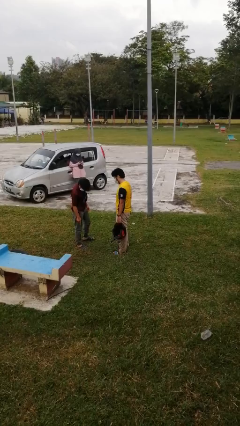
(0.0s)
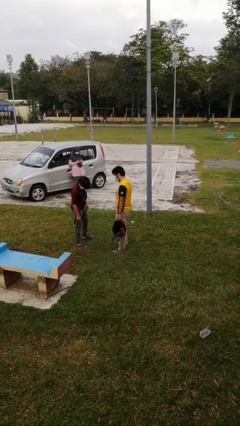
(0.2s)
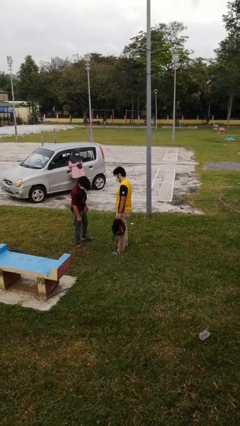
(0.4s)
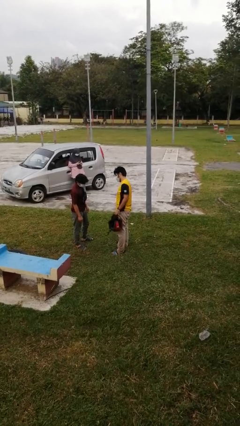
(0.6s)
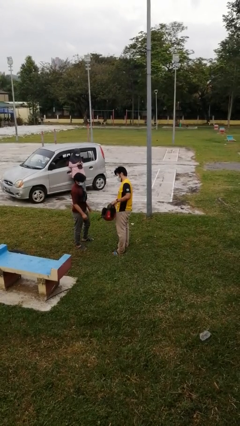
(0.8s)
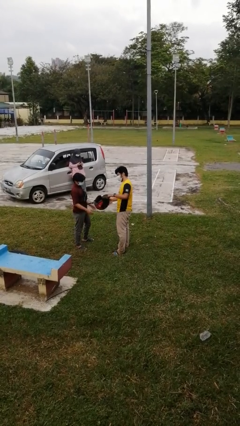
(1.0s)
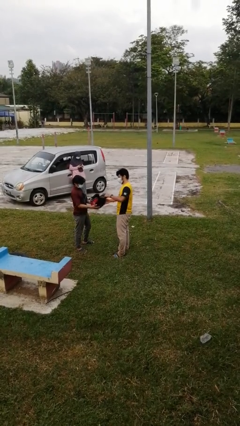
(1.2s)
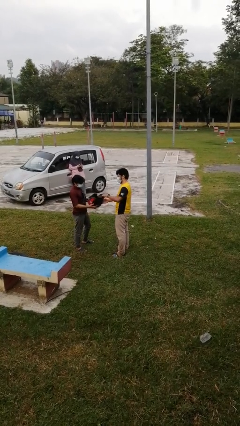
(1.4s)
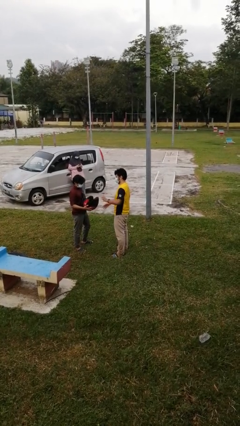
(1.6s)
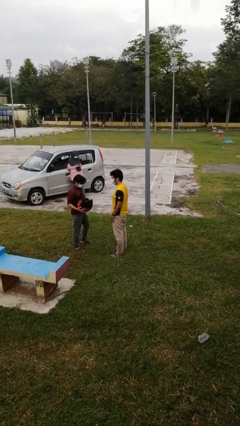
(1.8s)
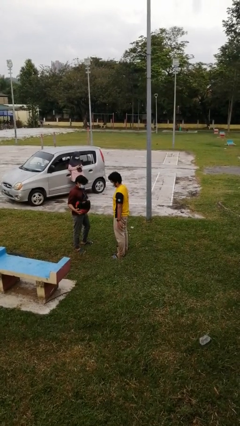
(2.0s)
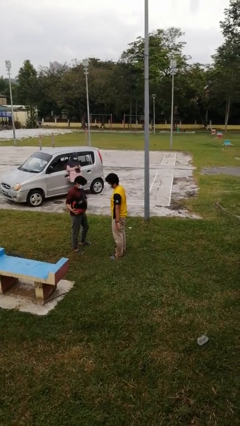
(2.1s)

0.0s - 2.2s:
person transfers object to person

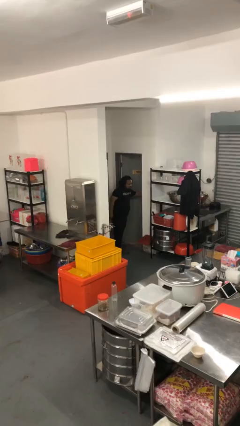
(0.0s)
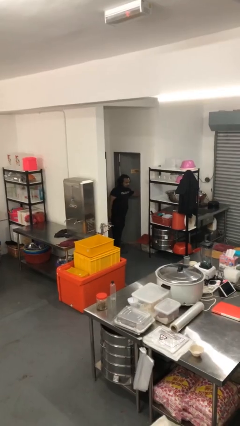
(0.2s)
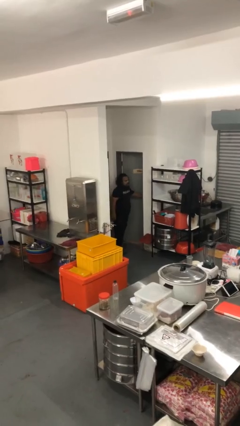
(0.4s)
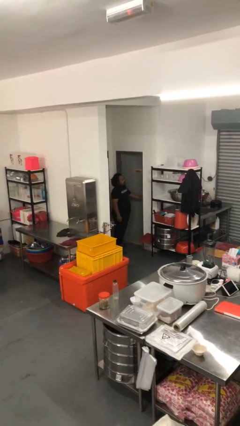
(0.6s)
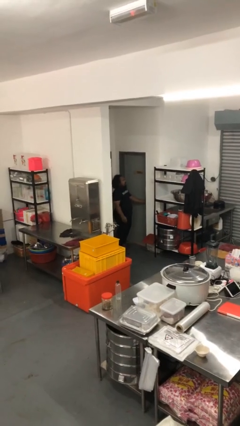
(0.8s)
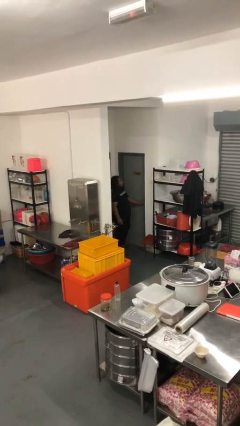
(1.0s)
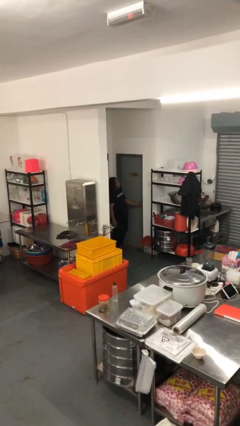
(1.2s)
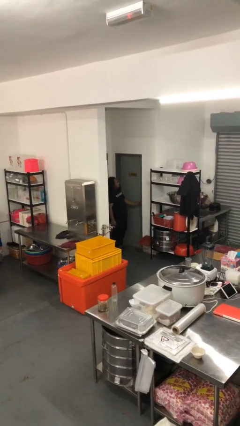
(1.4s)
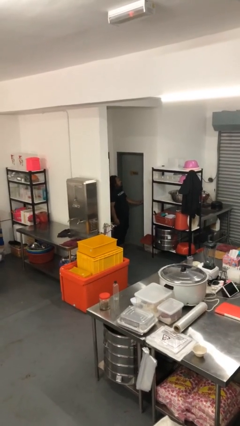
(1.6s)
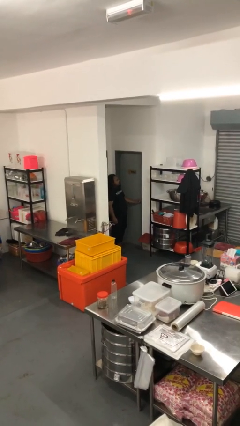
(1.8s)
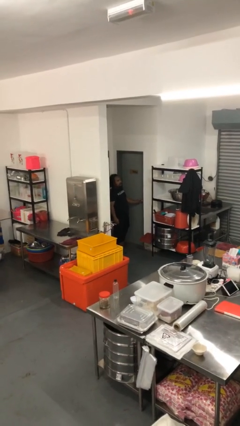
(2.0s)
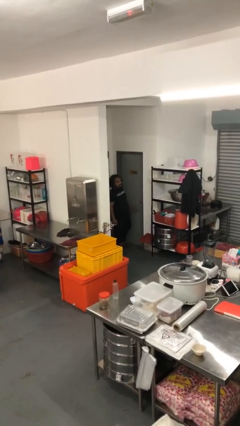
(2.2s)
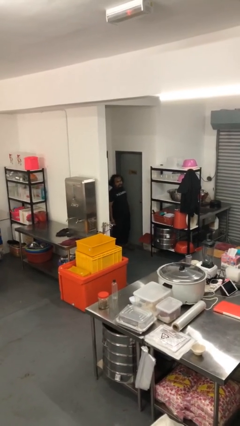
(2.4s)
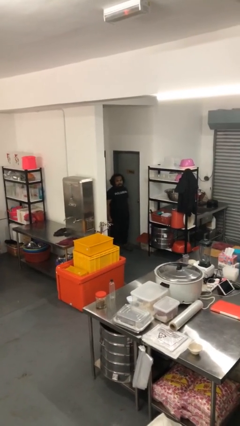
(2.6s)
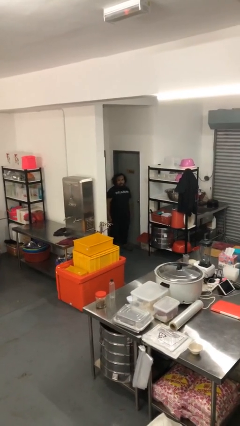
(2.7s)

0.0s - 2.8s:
person closes facility door

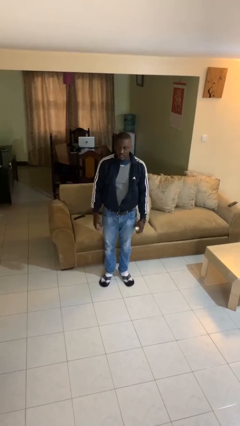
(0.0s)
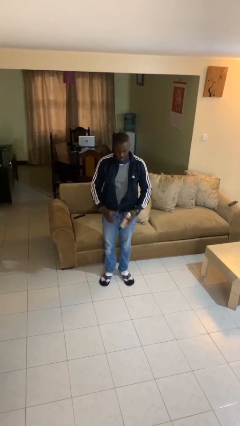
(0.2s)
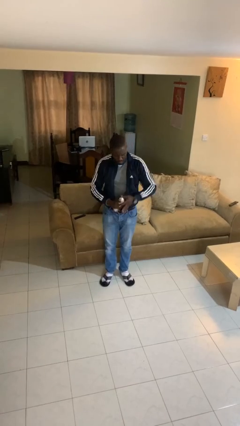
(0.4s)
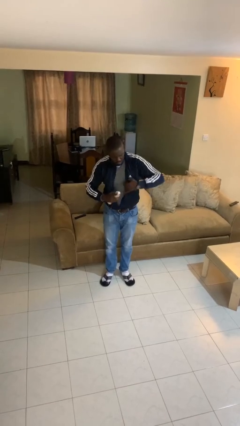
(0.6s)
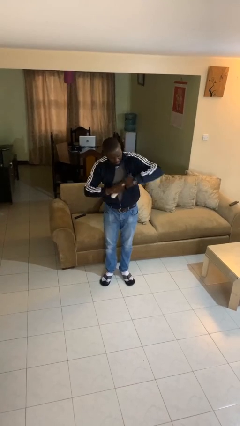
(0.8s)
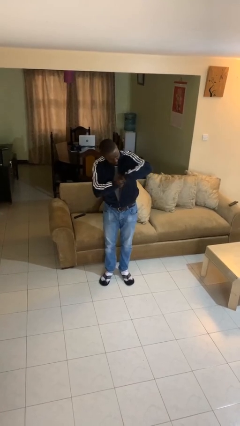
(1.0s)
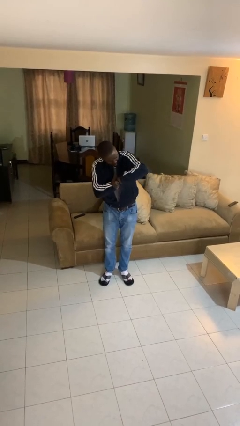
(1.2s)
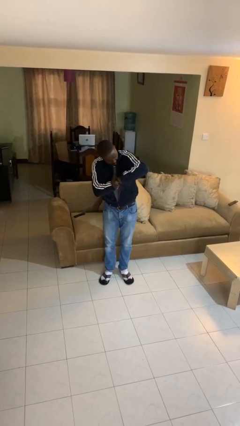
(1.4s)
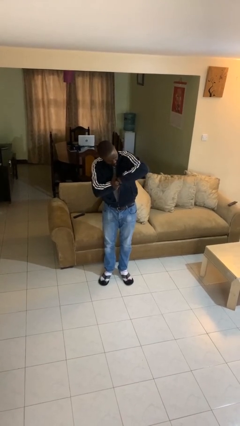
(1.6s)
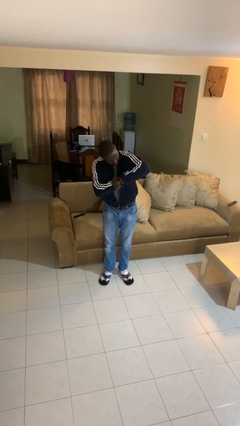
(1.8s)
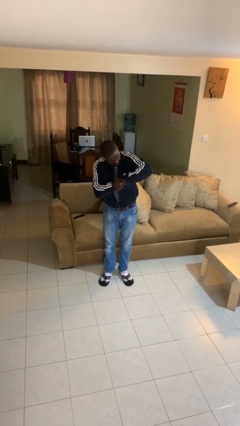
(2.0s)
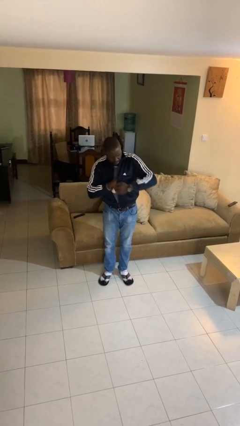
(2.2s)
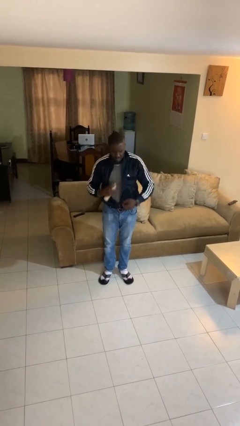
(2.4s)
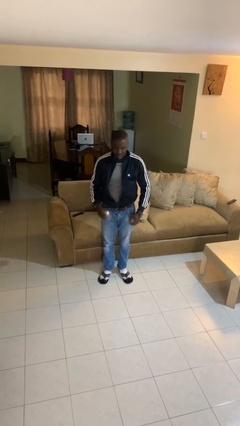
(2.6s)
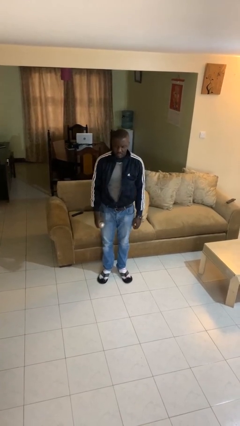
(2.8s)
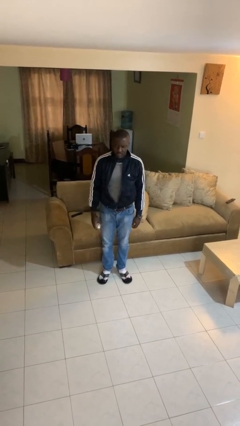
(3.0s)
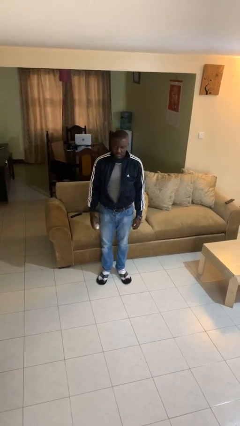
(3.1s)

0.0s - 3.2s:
person applies deodorant

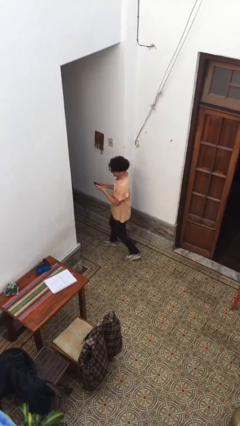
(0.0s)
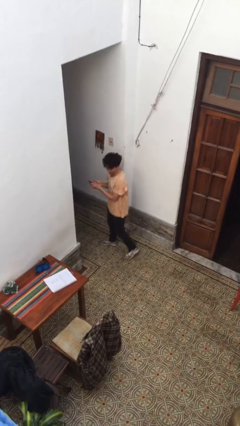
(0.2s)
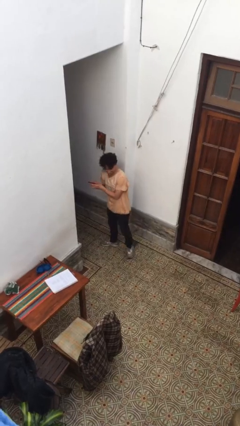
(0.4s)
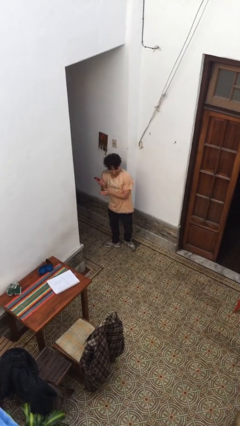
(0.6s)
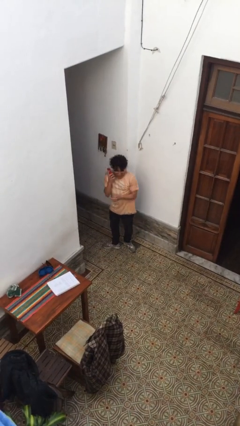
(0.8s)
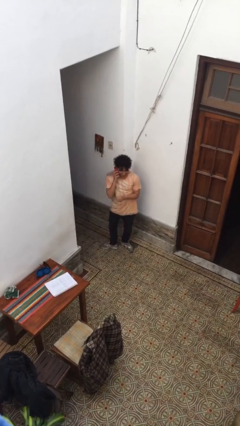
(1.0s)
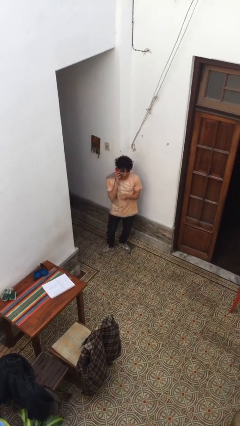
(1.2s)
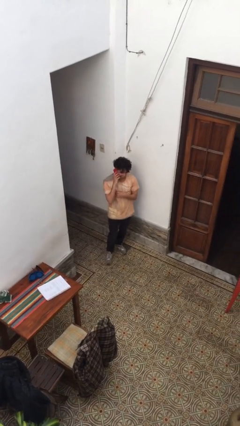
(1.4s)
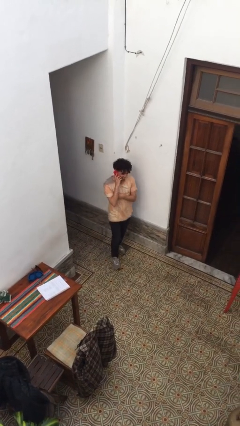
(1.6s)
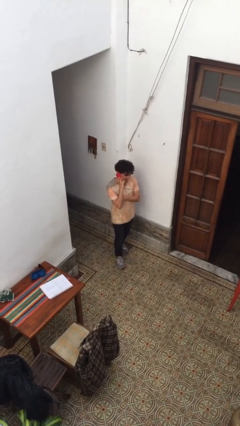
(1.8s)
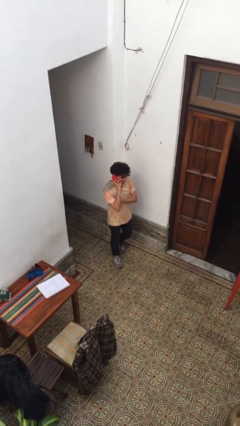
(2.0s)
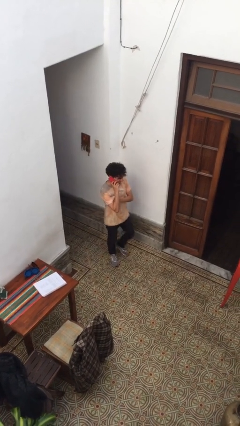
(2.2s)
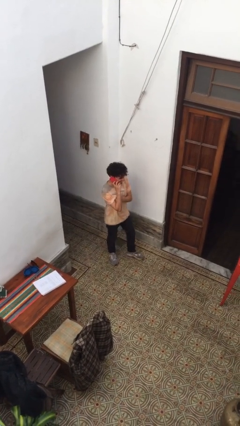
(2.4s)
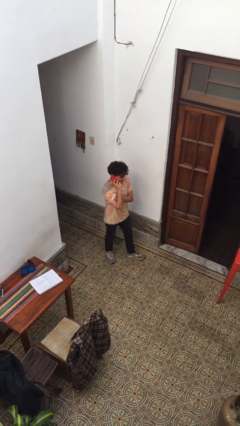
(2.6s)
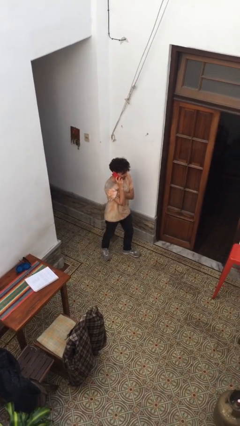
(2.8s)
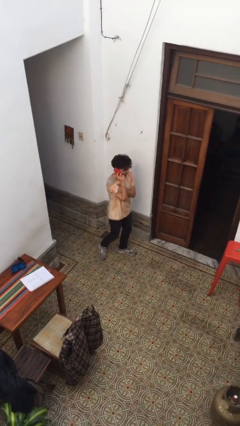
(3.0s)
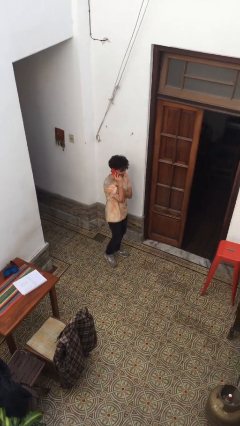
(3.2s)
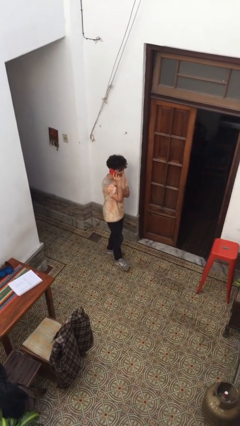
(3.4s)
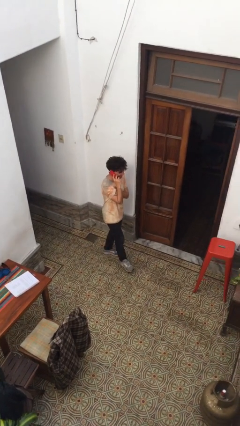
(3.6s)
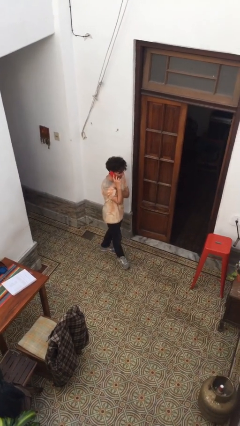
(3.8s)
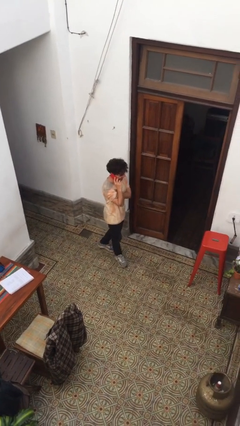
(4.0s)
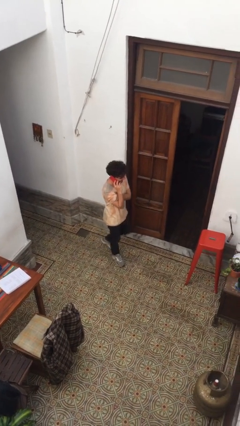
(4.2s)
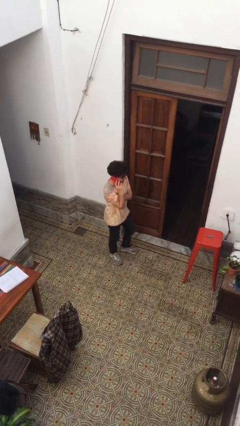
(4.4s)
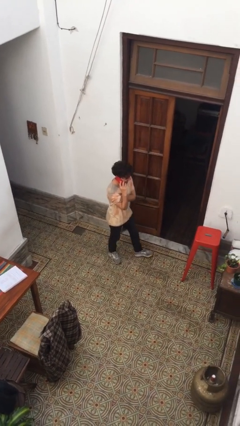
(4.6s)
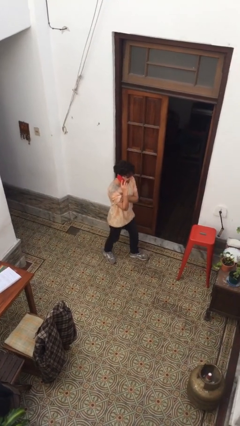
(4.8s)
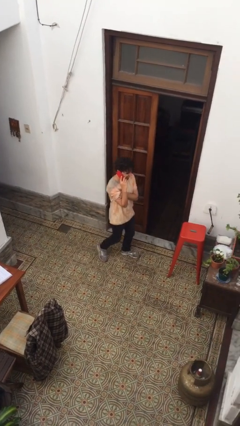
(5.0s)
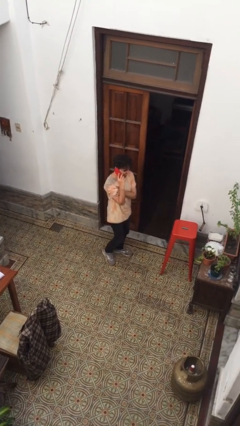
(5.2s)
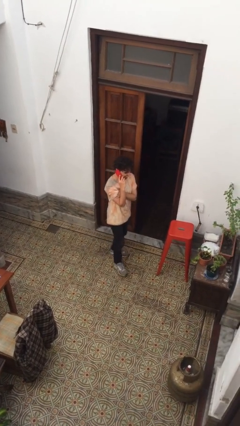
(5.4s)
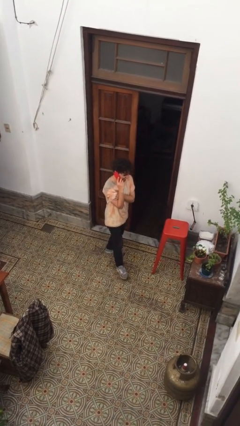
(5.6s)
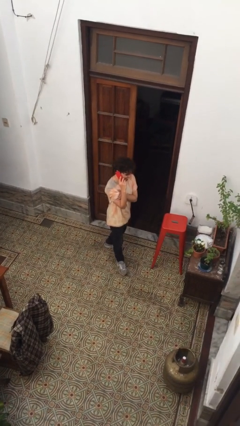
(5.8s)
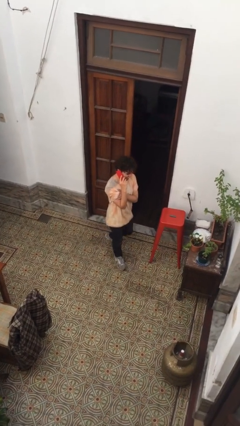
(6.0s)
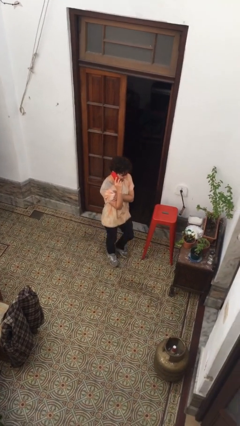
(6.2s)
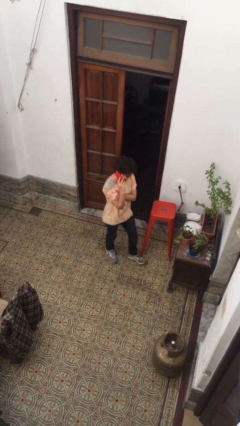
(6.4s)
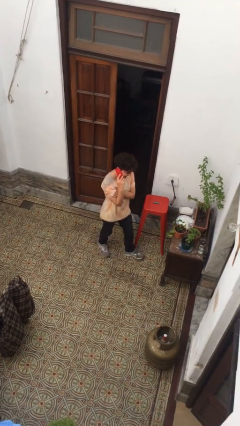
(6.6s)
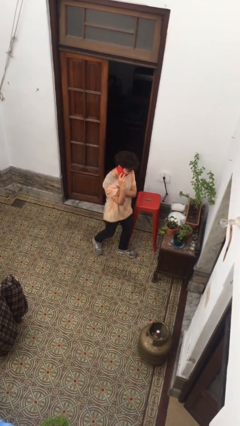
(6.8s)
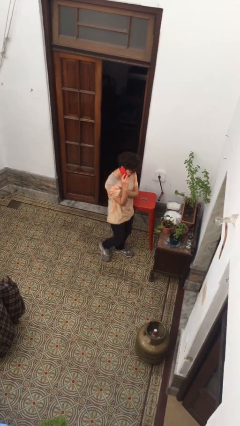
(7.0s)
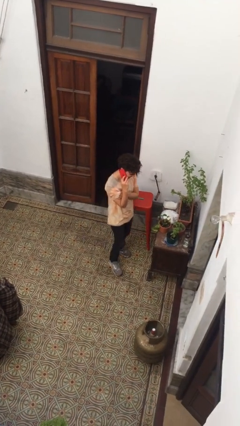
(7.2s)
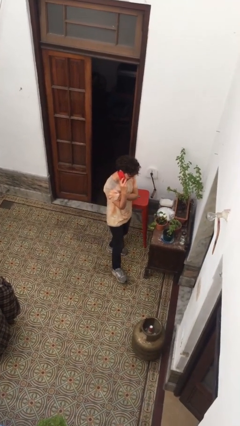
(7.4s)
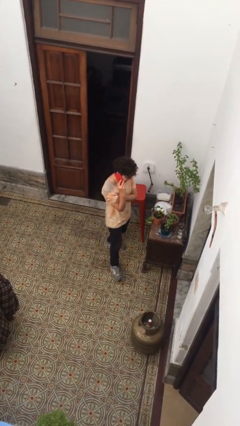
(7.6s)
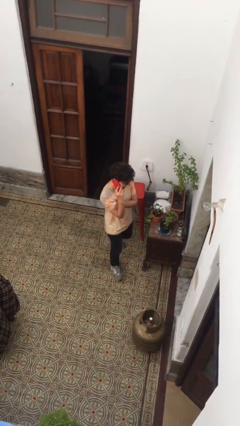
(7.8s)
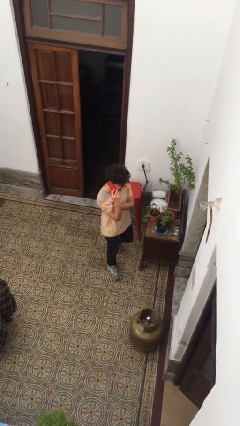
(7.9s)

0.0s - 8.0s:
person talks on phone

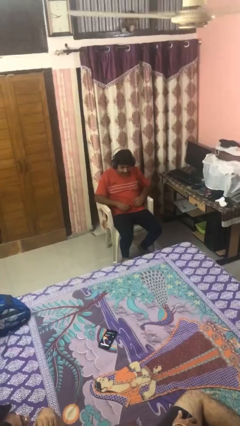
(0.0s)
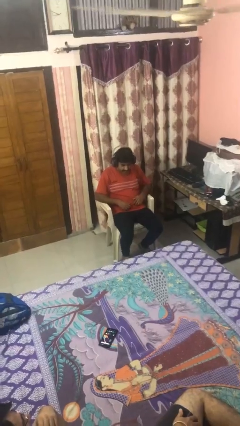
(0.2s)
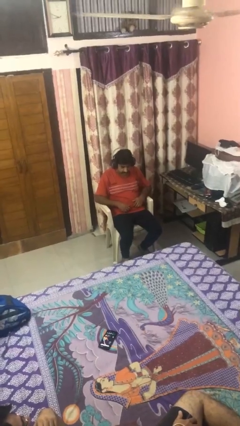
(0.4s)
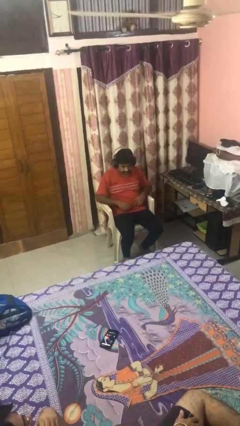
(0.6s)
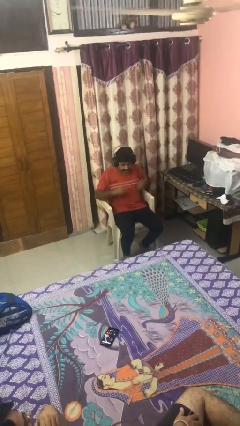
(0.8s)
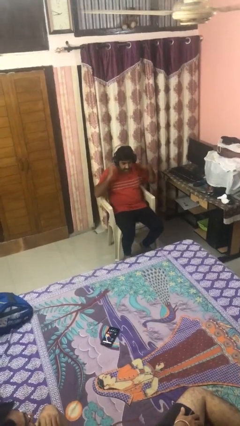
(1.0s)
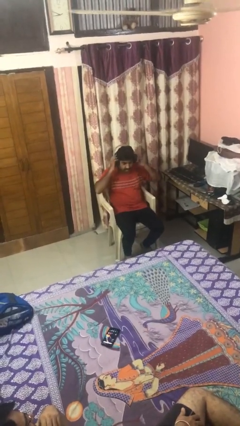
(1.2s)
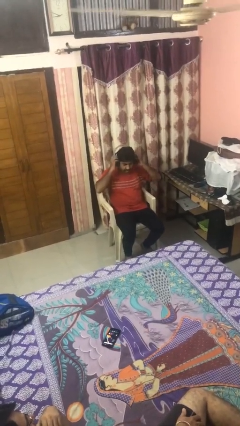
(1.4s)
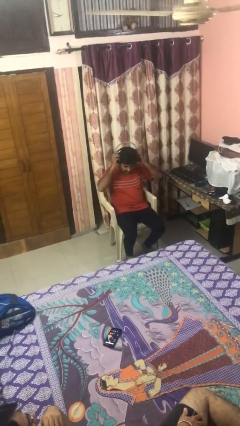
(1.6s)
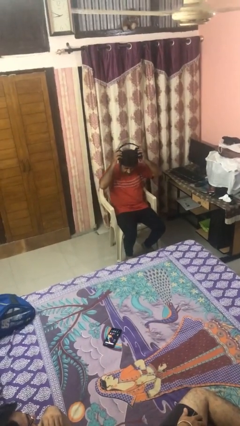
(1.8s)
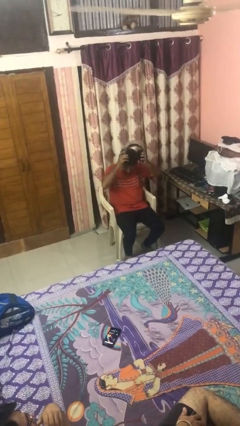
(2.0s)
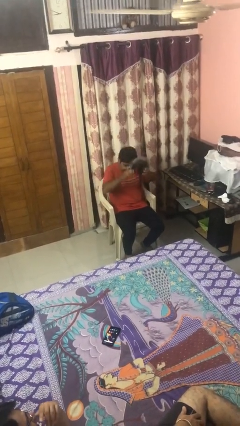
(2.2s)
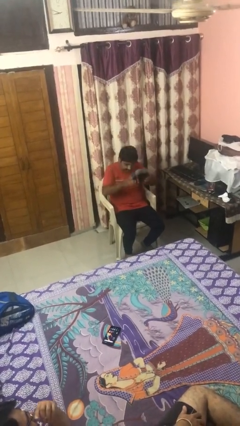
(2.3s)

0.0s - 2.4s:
person takes off headphones
